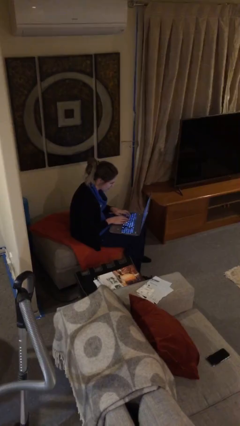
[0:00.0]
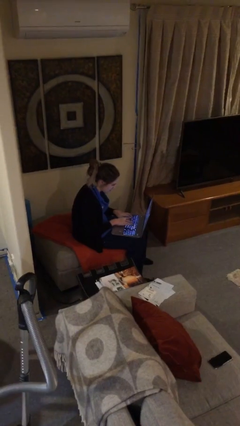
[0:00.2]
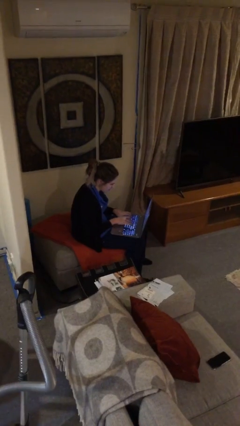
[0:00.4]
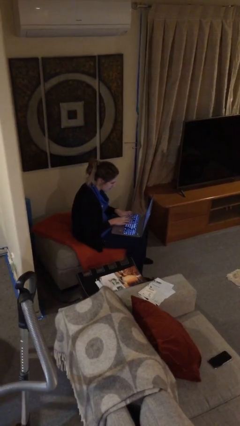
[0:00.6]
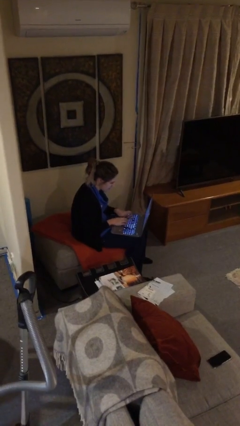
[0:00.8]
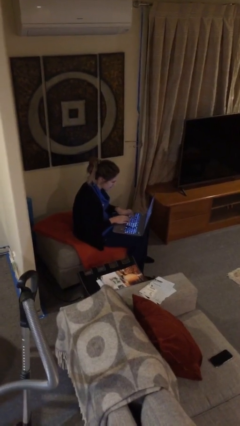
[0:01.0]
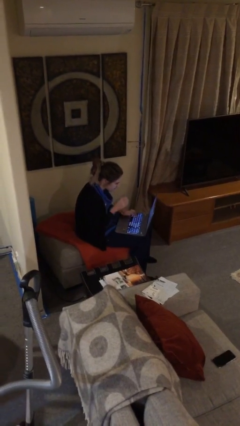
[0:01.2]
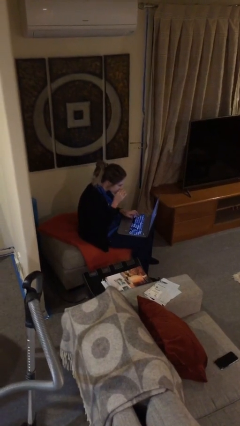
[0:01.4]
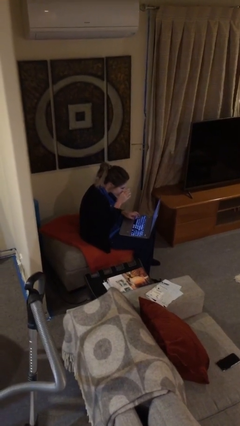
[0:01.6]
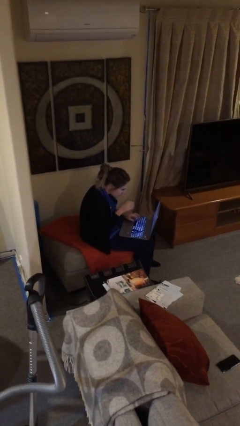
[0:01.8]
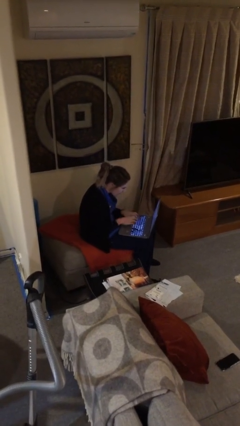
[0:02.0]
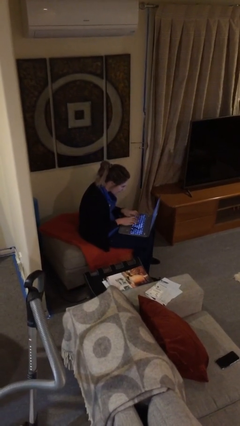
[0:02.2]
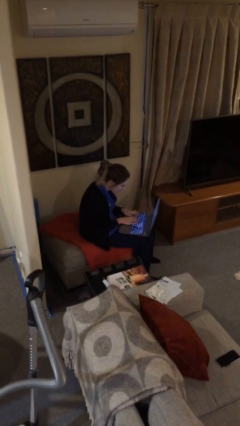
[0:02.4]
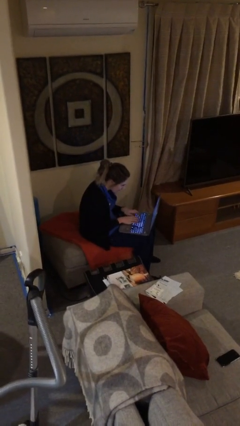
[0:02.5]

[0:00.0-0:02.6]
person interacts with laptop

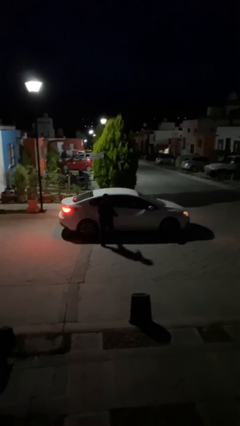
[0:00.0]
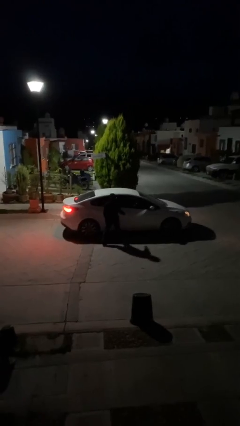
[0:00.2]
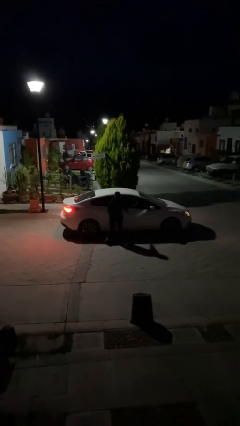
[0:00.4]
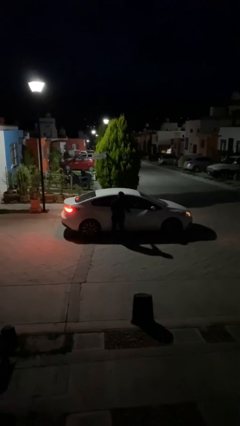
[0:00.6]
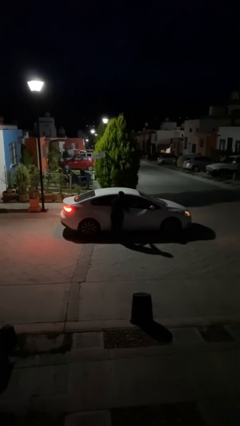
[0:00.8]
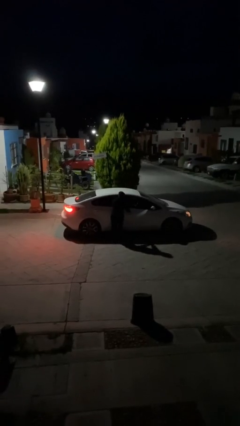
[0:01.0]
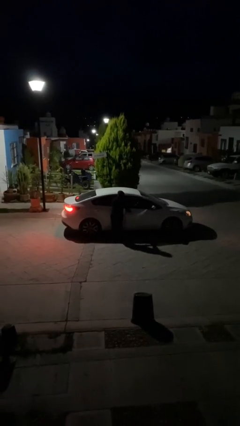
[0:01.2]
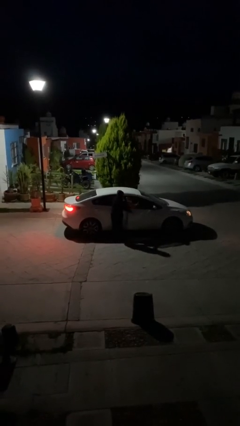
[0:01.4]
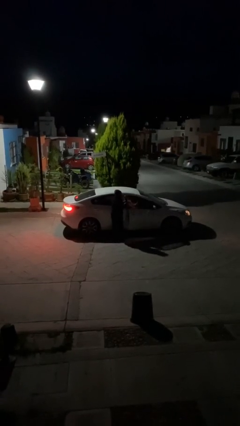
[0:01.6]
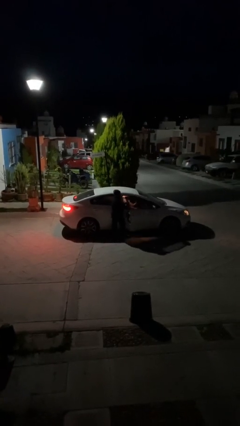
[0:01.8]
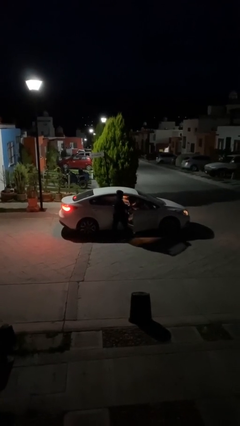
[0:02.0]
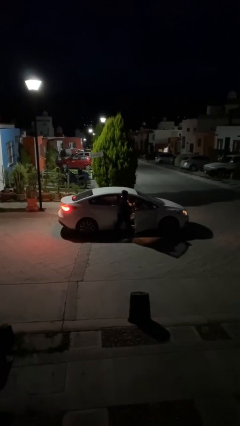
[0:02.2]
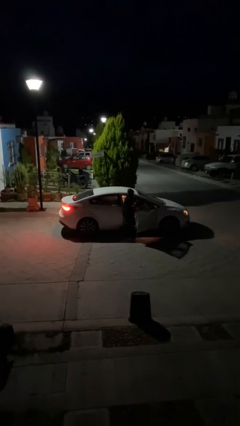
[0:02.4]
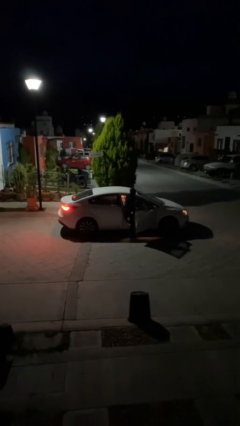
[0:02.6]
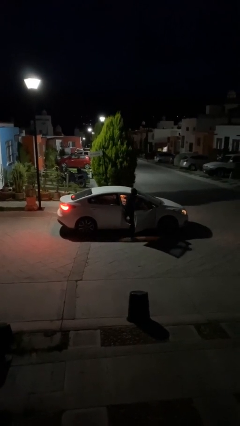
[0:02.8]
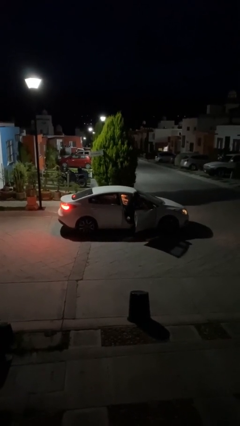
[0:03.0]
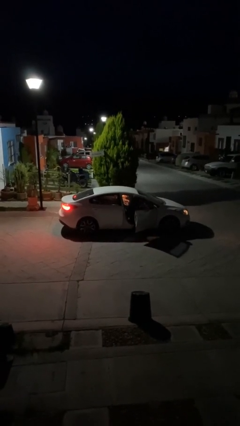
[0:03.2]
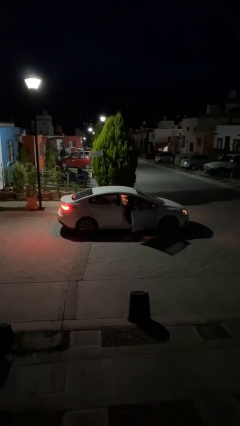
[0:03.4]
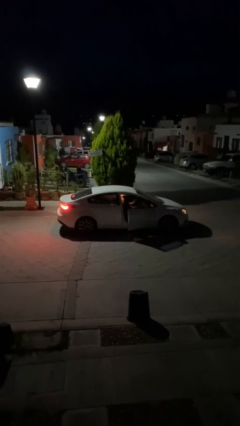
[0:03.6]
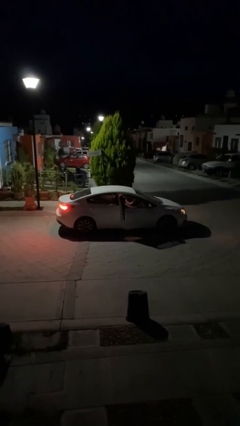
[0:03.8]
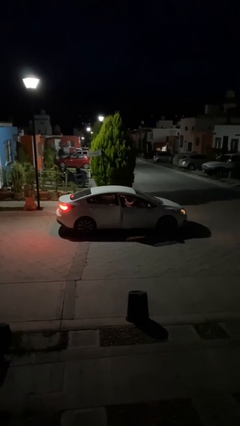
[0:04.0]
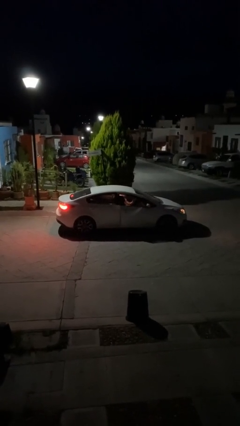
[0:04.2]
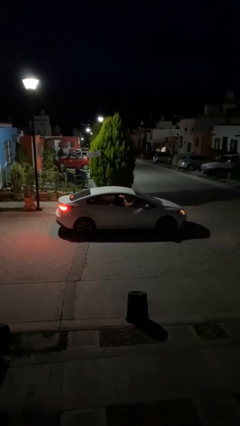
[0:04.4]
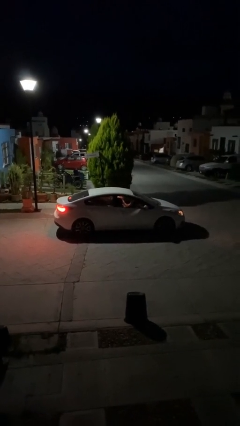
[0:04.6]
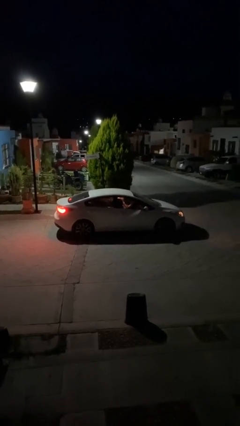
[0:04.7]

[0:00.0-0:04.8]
car picks up person

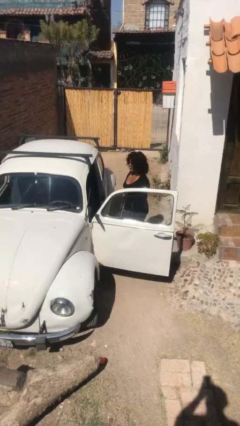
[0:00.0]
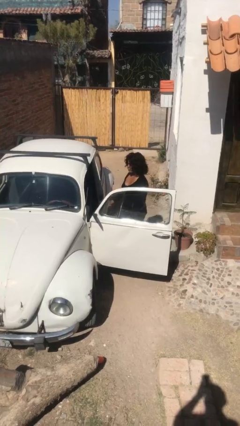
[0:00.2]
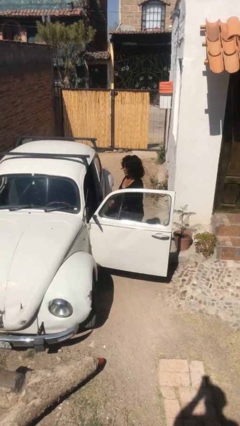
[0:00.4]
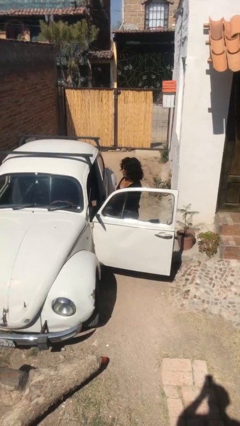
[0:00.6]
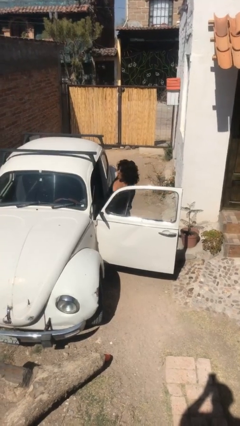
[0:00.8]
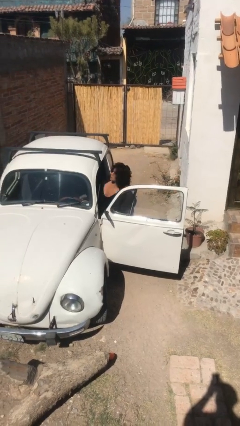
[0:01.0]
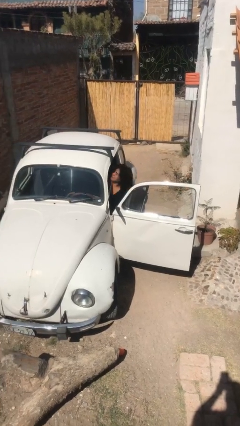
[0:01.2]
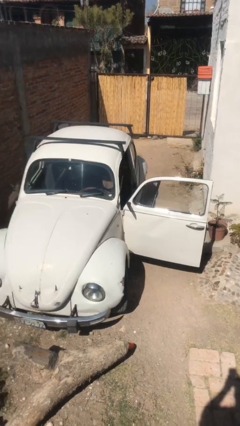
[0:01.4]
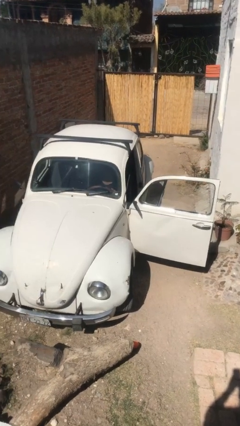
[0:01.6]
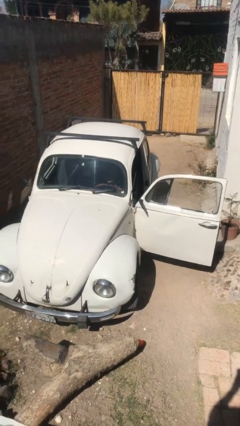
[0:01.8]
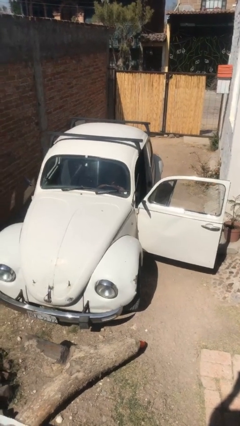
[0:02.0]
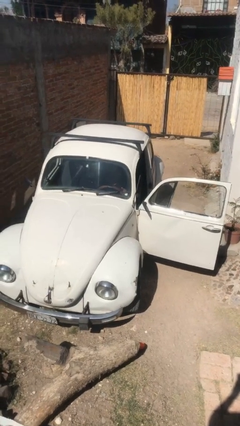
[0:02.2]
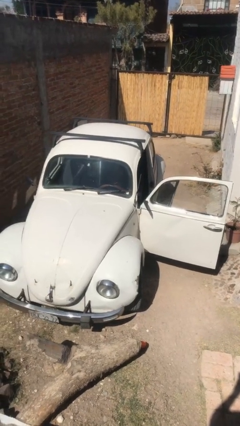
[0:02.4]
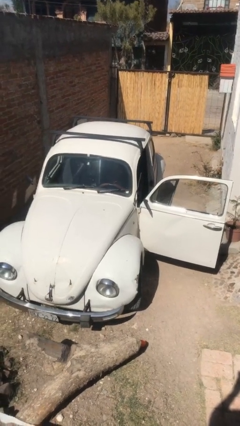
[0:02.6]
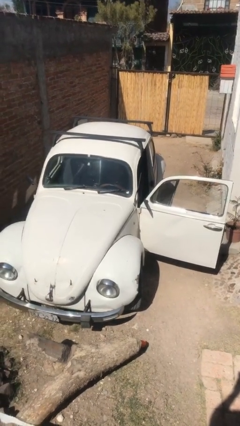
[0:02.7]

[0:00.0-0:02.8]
person enters car

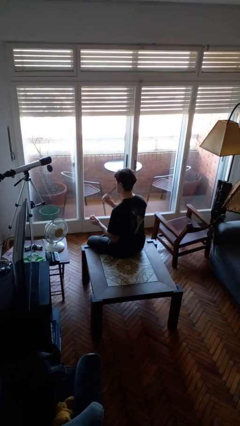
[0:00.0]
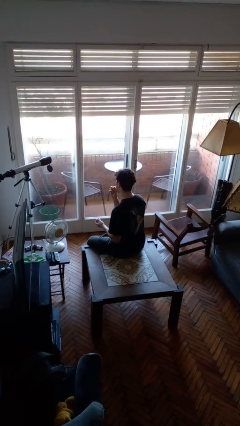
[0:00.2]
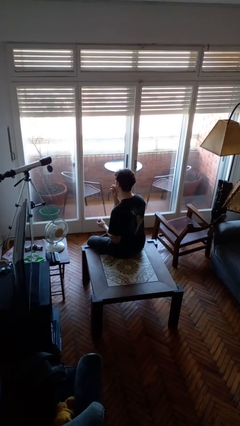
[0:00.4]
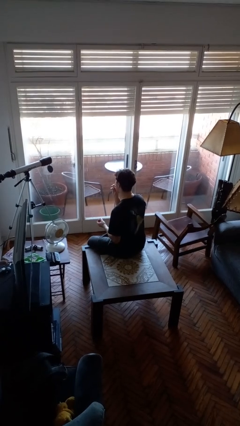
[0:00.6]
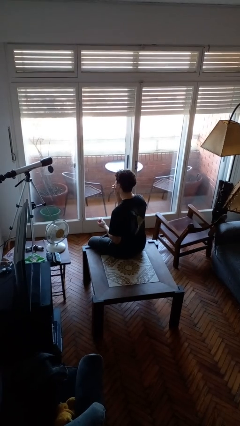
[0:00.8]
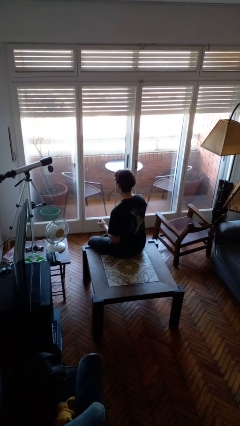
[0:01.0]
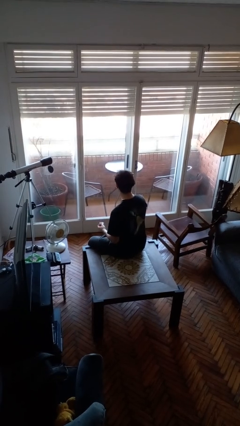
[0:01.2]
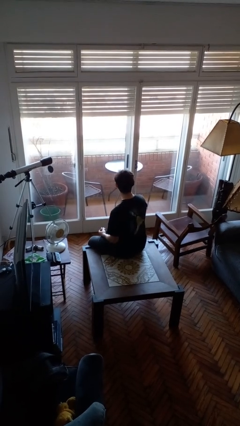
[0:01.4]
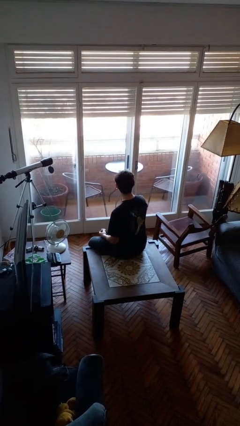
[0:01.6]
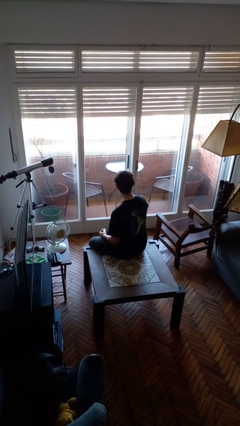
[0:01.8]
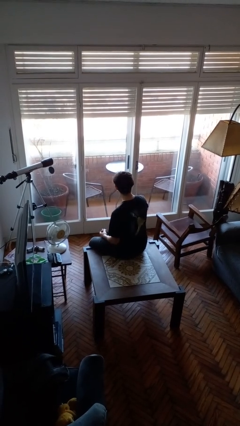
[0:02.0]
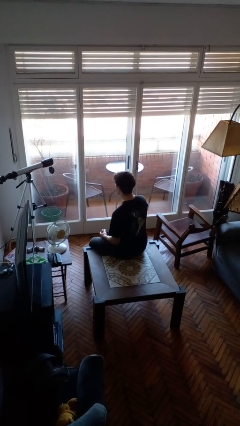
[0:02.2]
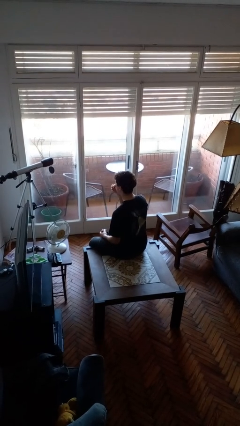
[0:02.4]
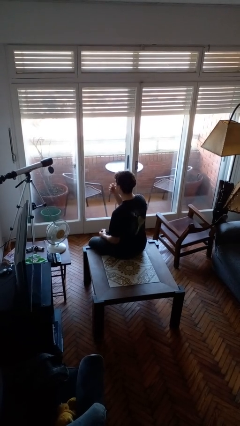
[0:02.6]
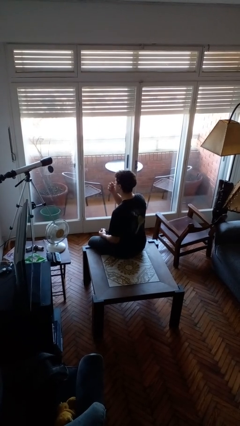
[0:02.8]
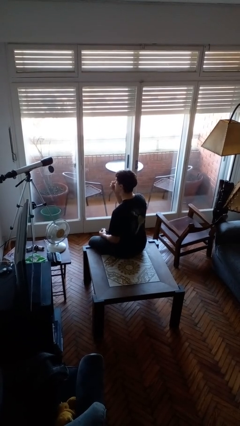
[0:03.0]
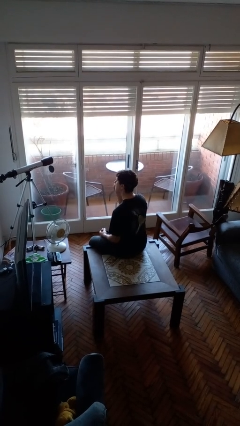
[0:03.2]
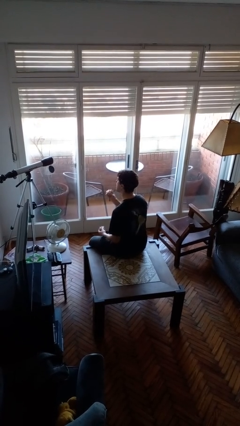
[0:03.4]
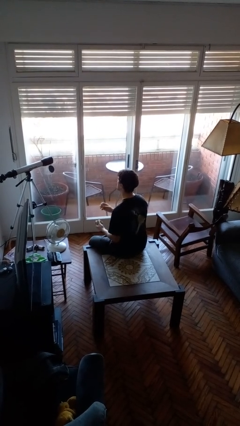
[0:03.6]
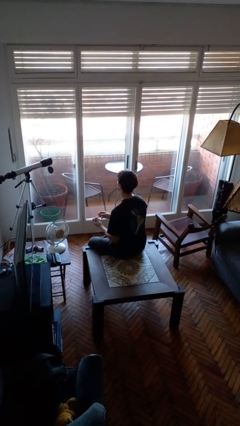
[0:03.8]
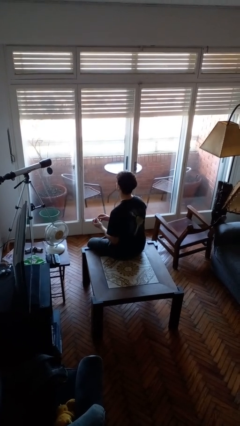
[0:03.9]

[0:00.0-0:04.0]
person applies lip makeup

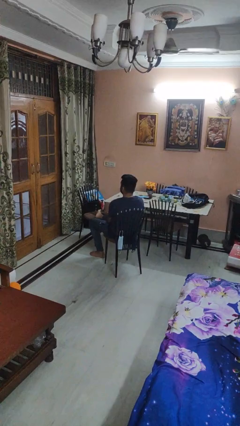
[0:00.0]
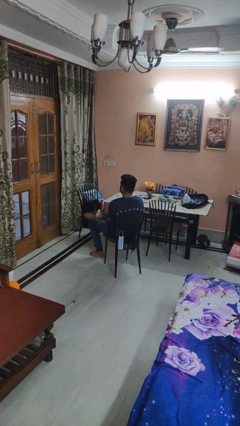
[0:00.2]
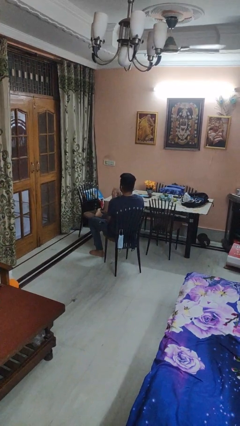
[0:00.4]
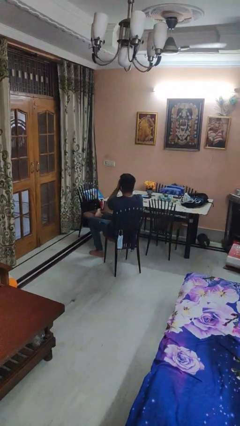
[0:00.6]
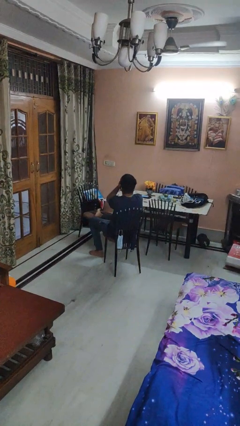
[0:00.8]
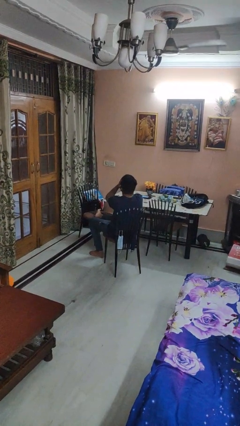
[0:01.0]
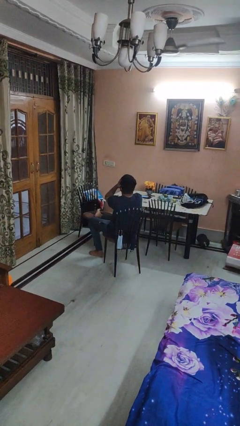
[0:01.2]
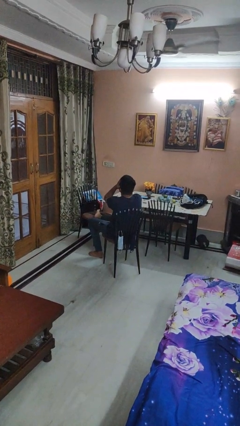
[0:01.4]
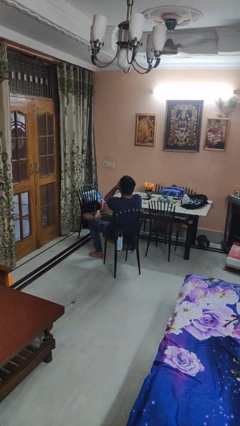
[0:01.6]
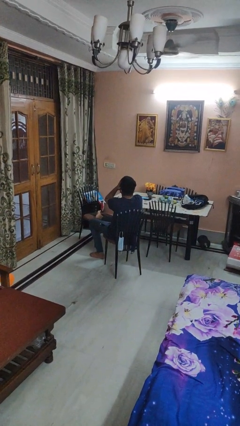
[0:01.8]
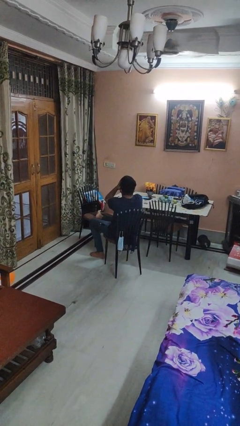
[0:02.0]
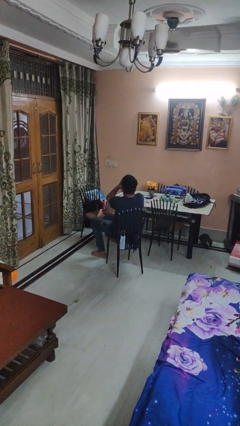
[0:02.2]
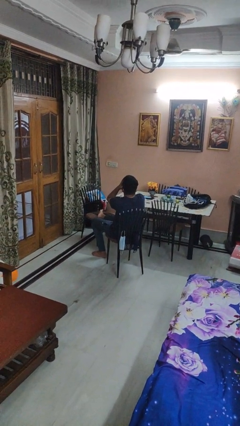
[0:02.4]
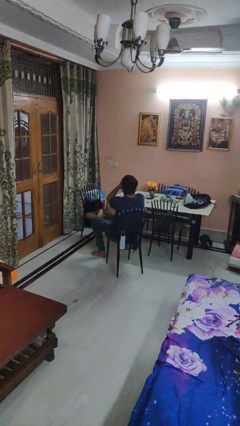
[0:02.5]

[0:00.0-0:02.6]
person covers face with hands

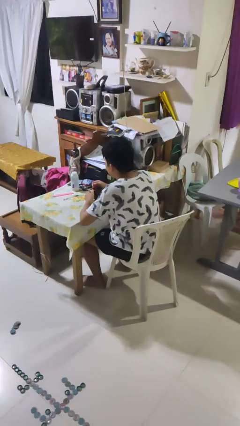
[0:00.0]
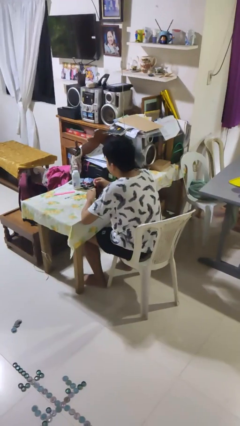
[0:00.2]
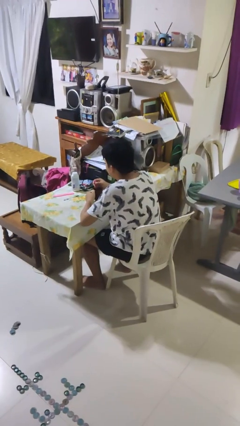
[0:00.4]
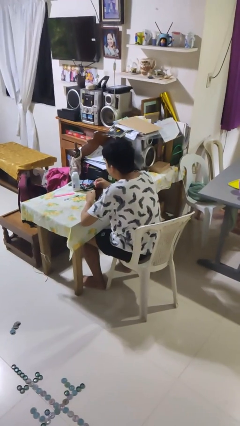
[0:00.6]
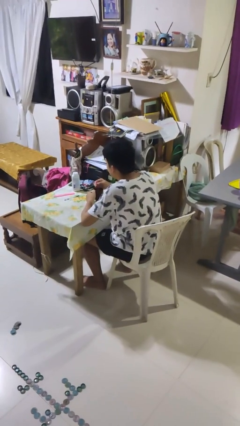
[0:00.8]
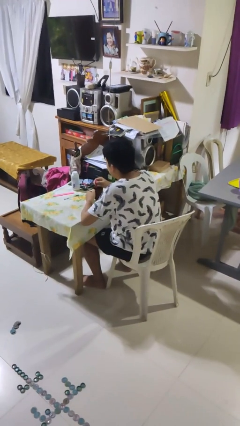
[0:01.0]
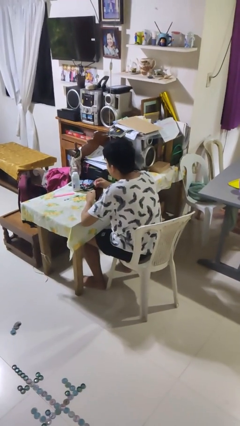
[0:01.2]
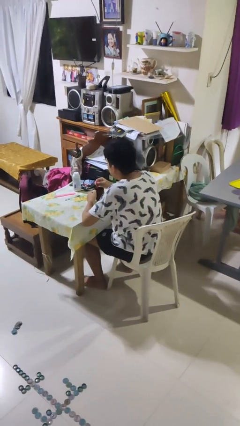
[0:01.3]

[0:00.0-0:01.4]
person stirs mug
